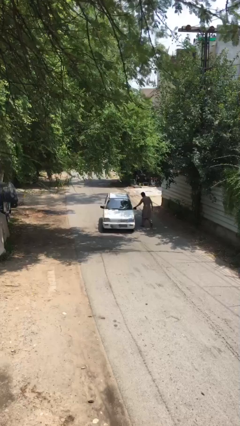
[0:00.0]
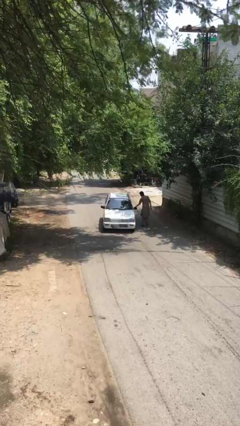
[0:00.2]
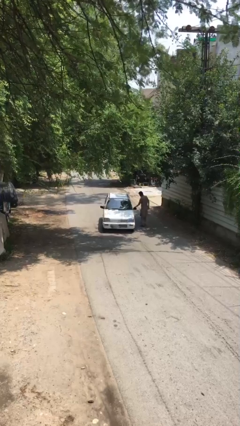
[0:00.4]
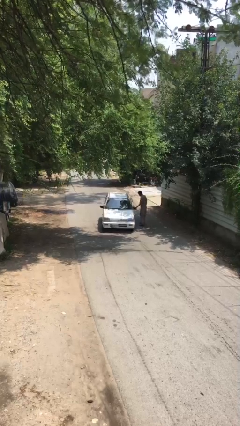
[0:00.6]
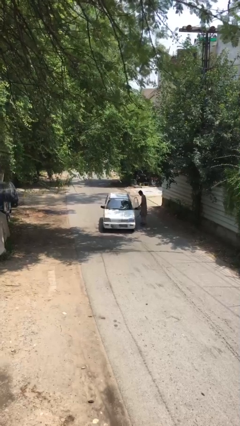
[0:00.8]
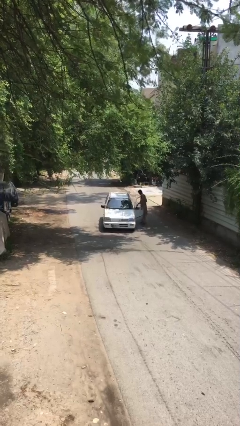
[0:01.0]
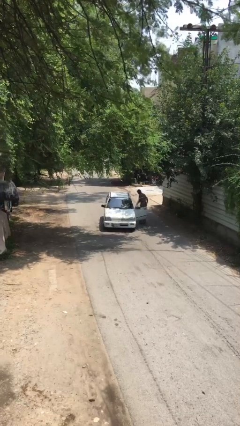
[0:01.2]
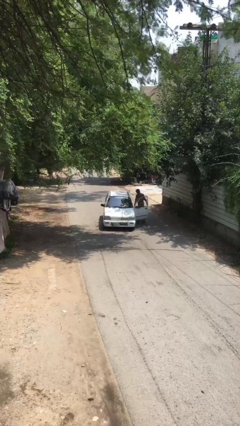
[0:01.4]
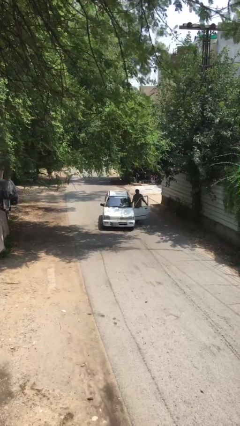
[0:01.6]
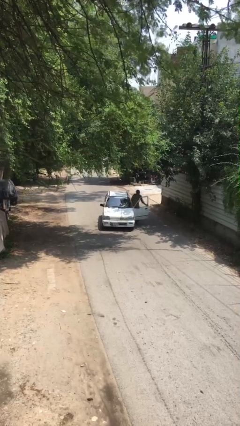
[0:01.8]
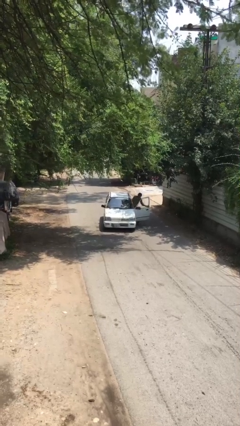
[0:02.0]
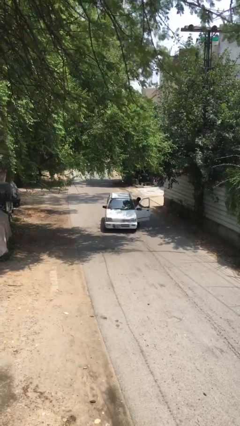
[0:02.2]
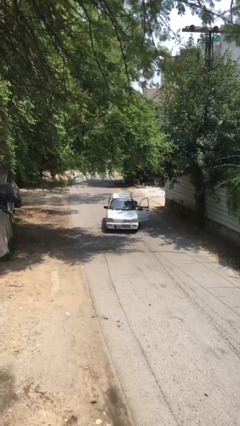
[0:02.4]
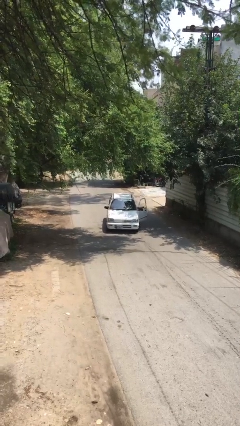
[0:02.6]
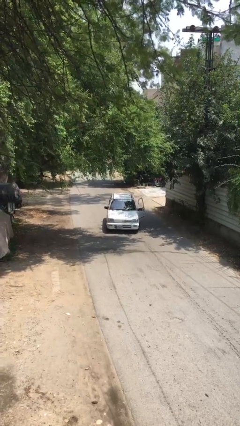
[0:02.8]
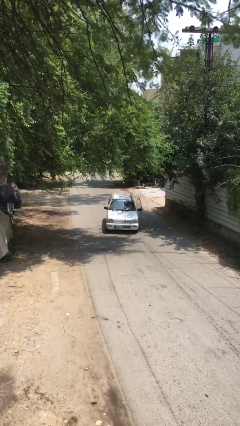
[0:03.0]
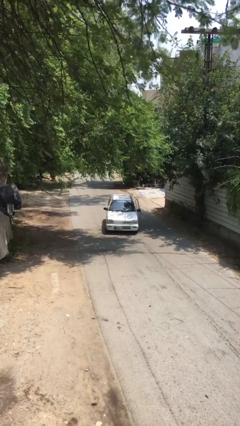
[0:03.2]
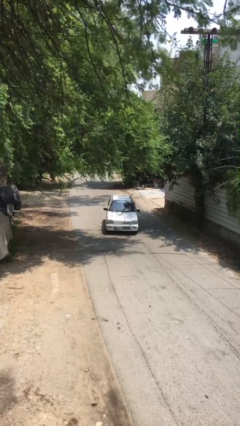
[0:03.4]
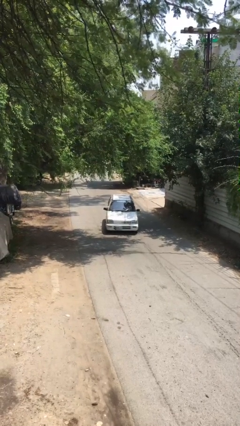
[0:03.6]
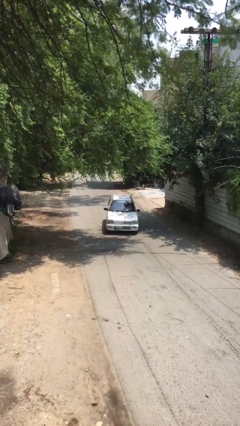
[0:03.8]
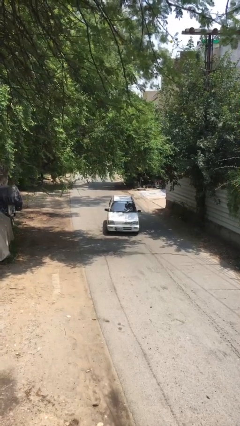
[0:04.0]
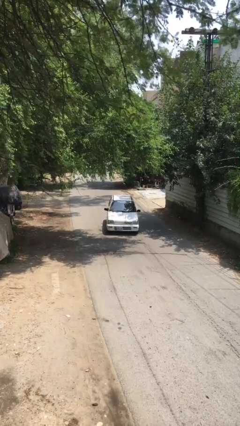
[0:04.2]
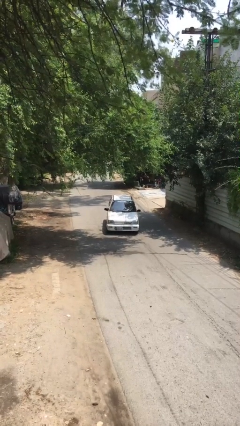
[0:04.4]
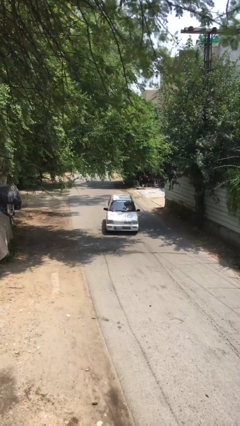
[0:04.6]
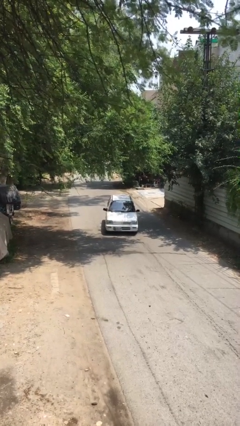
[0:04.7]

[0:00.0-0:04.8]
car picks up person

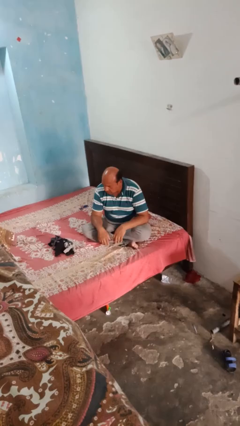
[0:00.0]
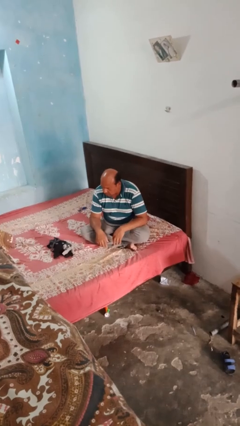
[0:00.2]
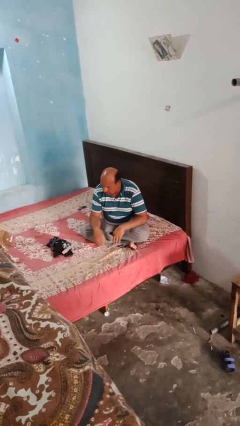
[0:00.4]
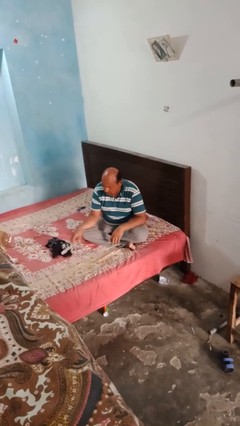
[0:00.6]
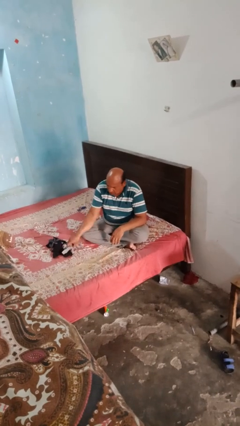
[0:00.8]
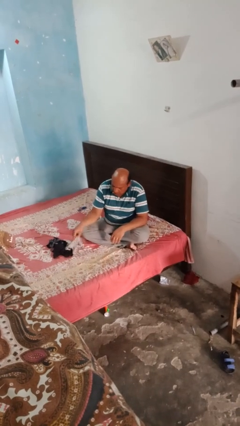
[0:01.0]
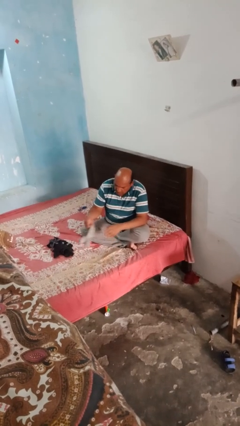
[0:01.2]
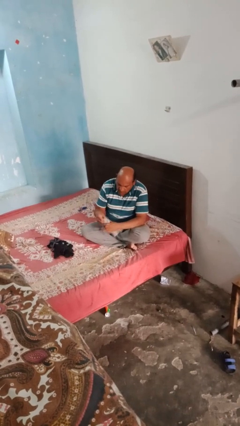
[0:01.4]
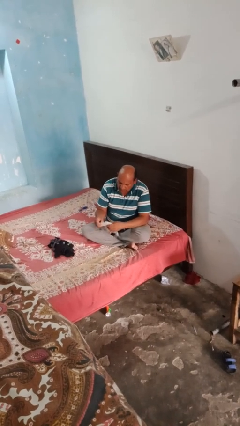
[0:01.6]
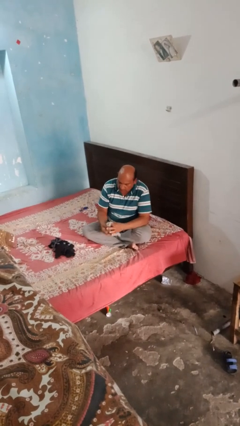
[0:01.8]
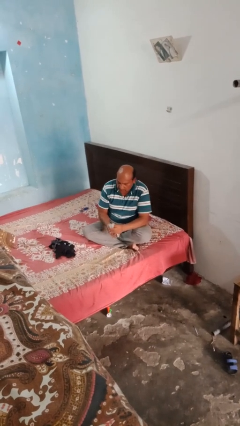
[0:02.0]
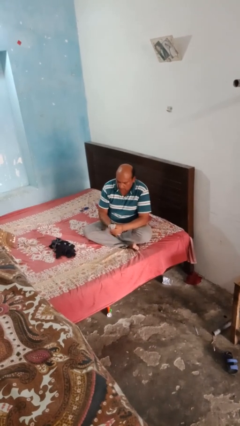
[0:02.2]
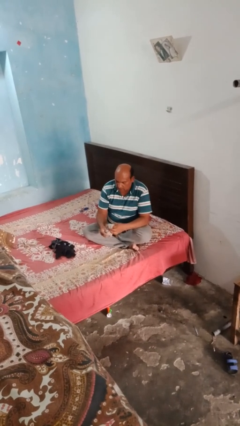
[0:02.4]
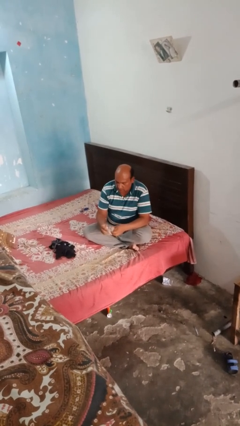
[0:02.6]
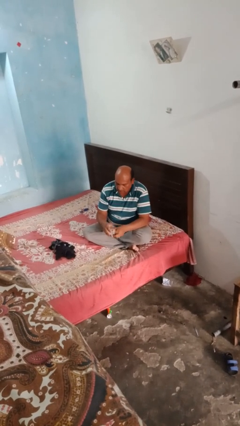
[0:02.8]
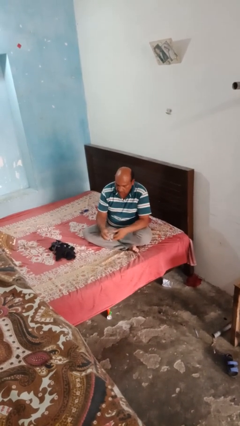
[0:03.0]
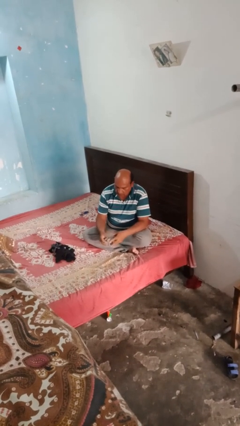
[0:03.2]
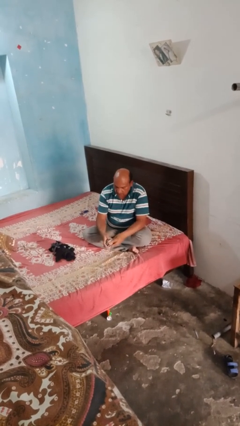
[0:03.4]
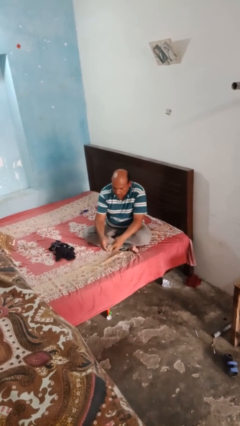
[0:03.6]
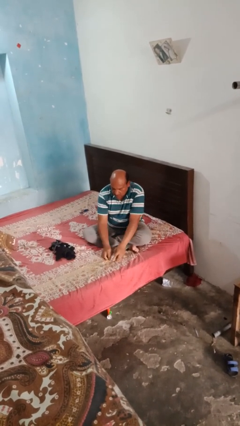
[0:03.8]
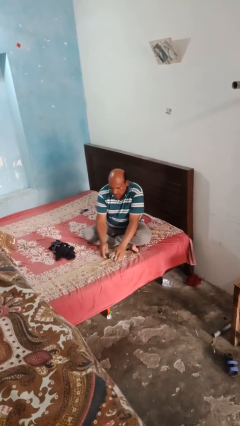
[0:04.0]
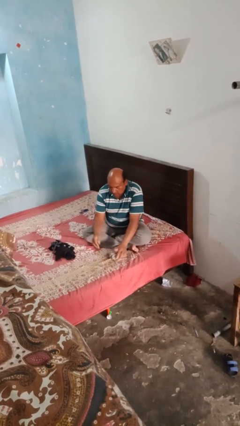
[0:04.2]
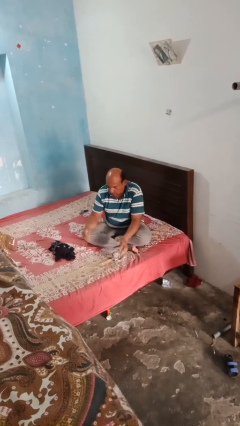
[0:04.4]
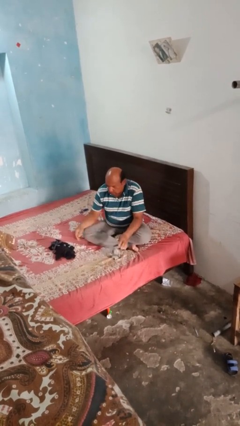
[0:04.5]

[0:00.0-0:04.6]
person folds socks

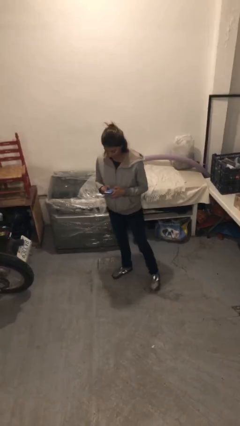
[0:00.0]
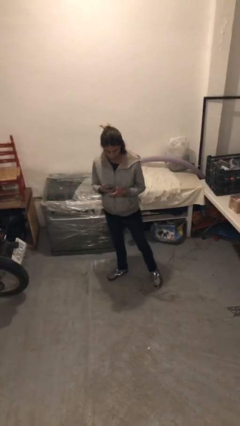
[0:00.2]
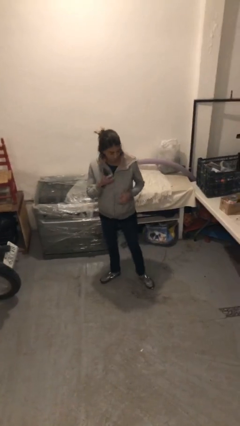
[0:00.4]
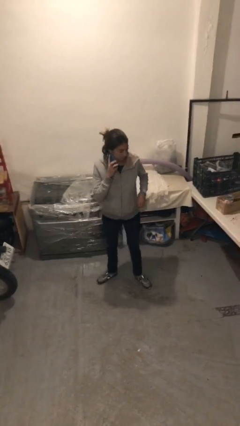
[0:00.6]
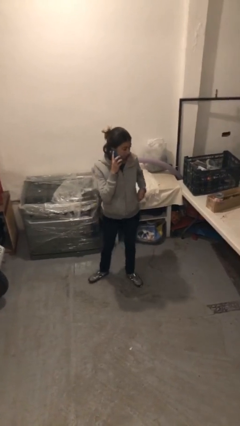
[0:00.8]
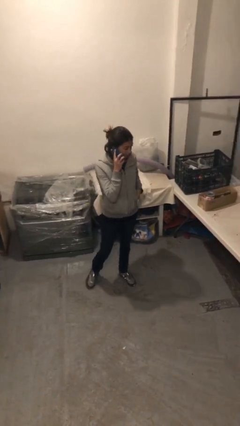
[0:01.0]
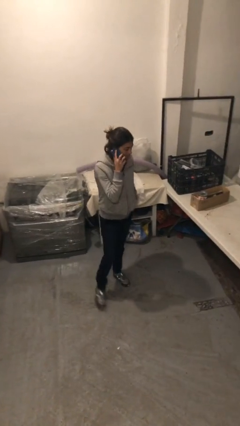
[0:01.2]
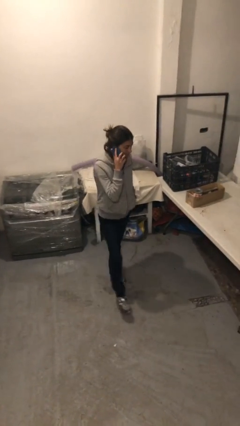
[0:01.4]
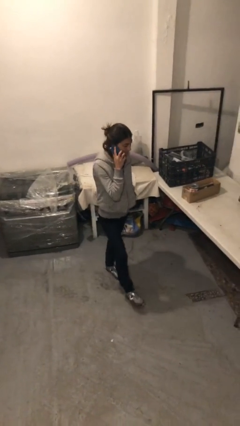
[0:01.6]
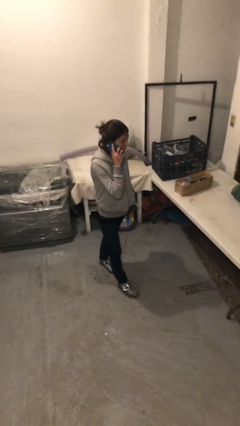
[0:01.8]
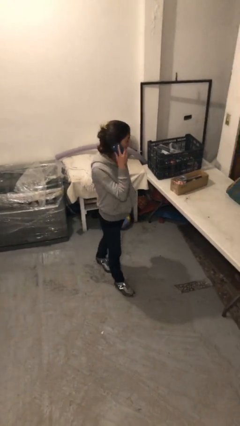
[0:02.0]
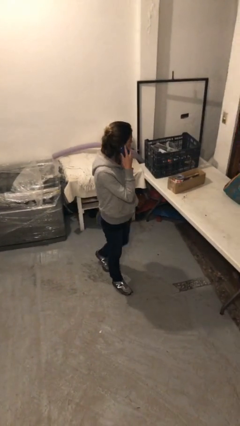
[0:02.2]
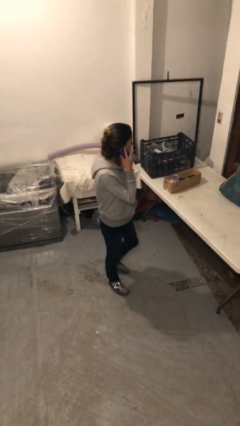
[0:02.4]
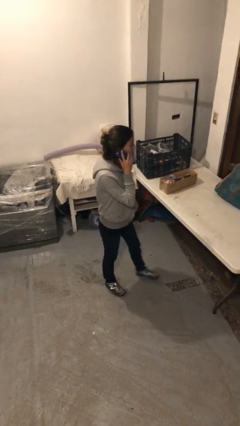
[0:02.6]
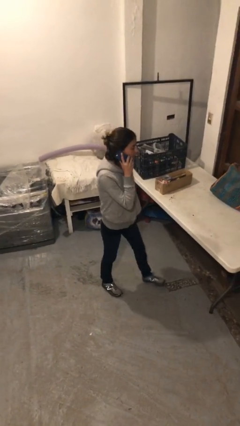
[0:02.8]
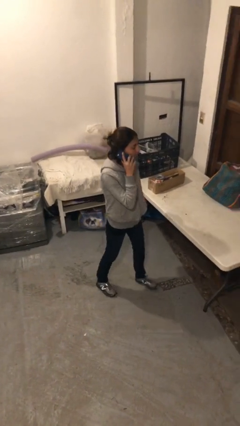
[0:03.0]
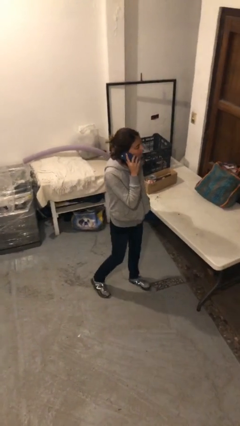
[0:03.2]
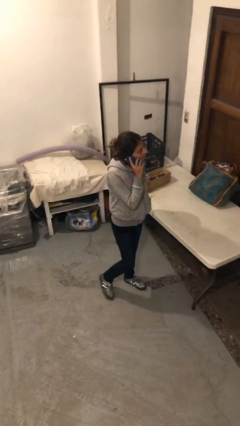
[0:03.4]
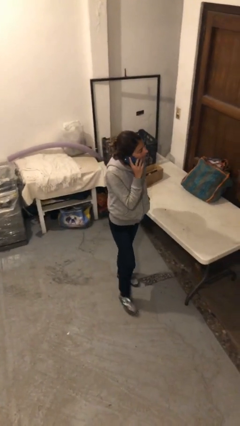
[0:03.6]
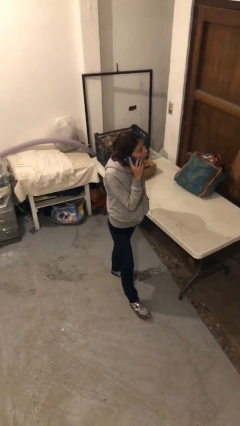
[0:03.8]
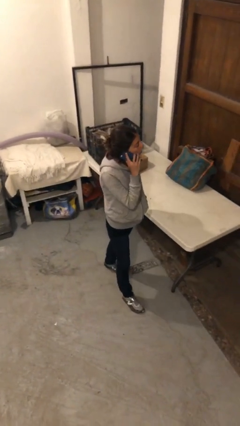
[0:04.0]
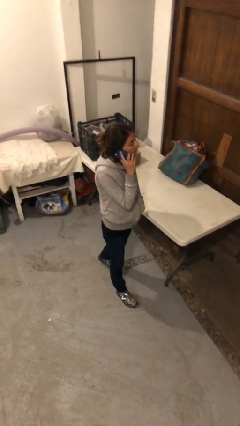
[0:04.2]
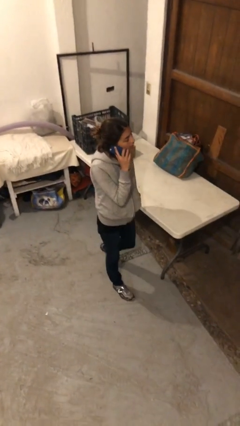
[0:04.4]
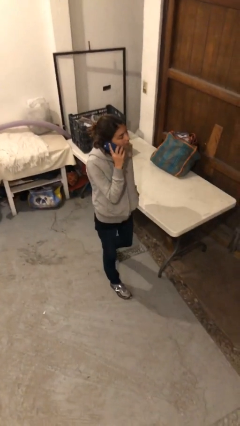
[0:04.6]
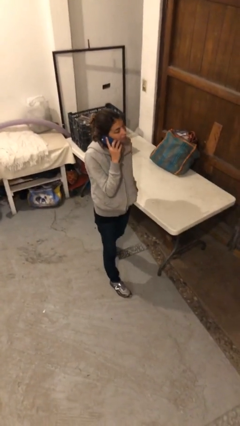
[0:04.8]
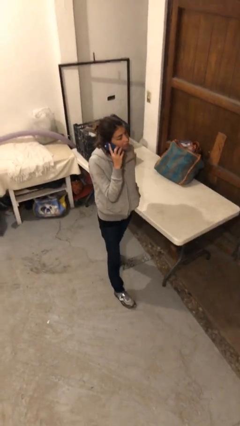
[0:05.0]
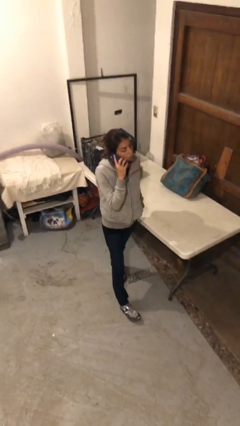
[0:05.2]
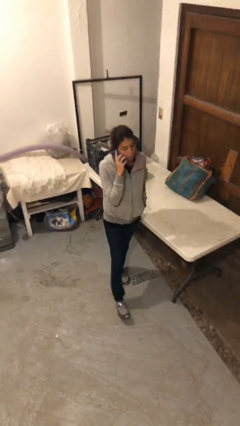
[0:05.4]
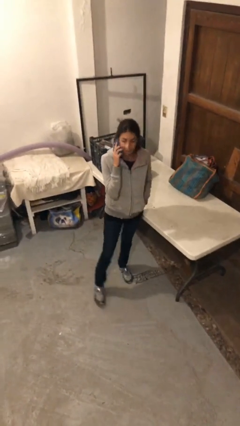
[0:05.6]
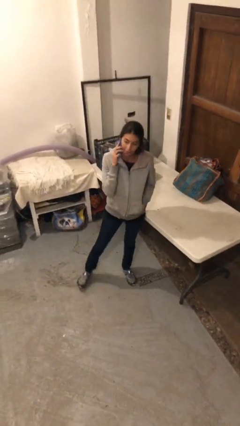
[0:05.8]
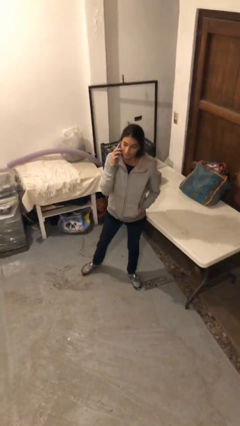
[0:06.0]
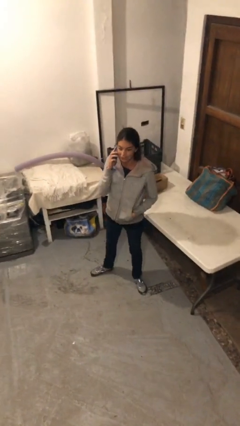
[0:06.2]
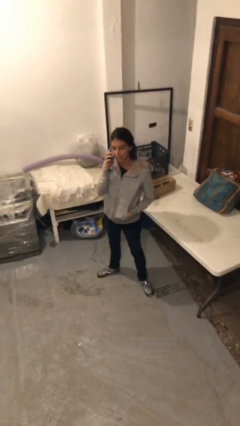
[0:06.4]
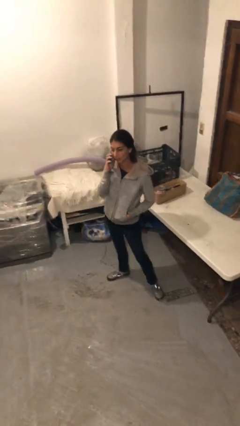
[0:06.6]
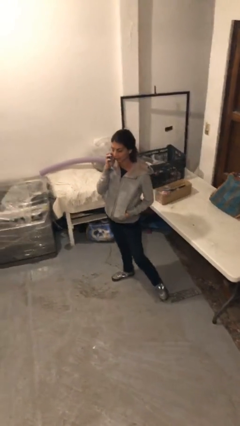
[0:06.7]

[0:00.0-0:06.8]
person talks on phone

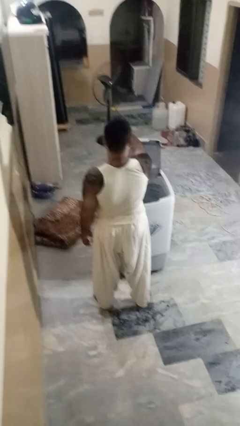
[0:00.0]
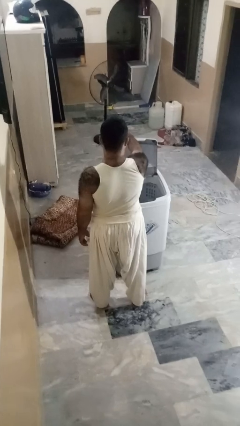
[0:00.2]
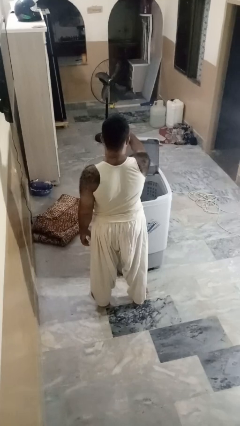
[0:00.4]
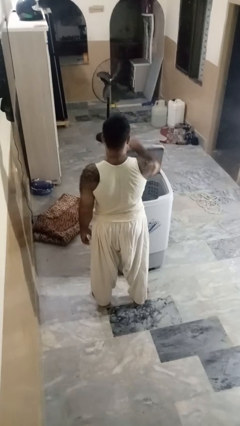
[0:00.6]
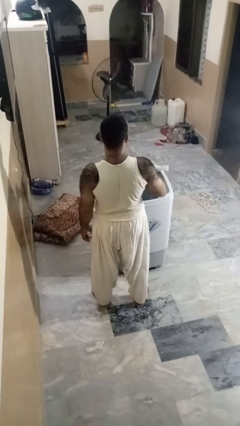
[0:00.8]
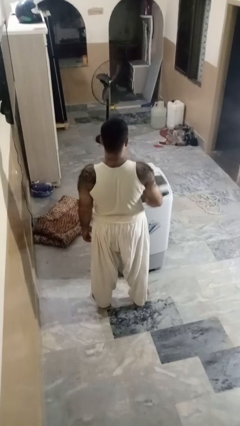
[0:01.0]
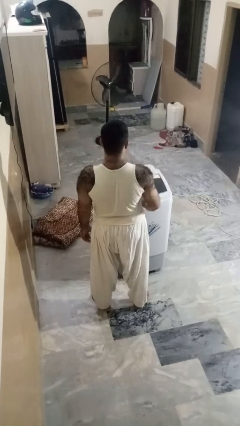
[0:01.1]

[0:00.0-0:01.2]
person closes clothes washer

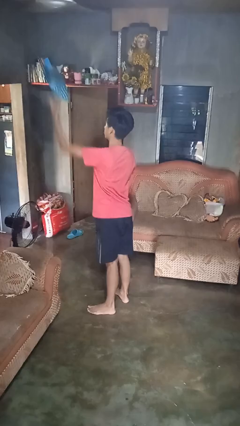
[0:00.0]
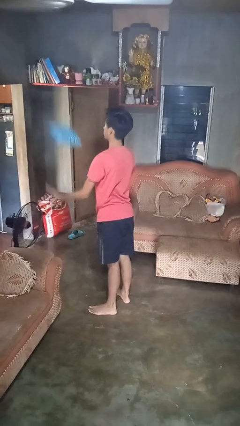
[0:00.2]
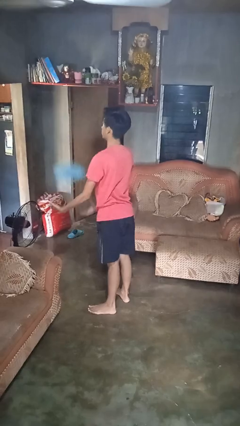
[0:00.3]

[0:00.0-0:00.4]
person drops object
